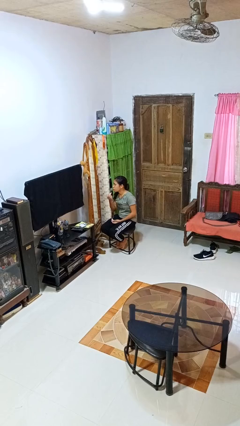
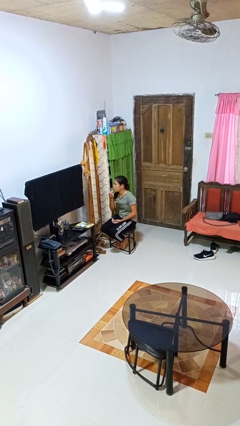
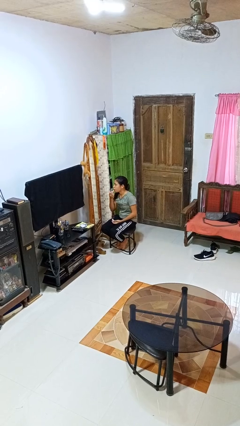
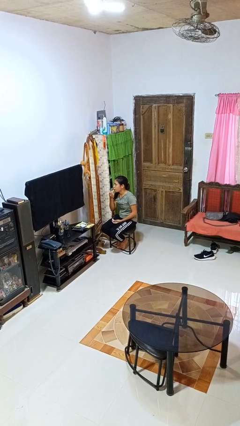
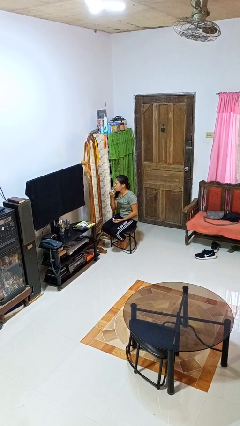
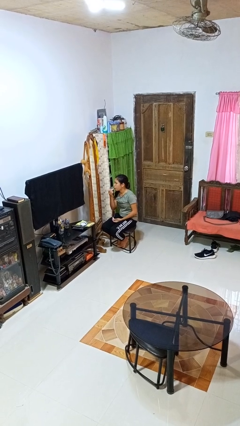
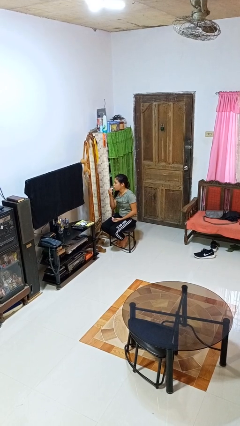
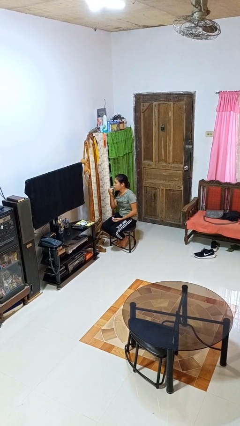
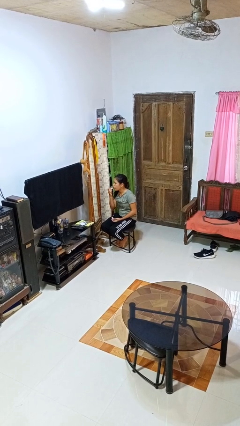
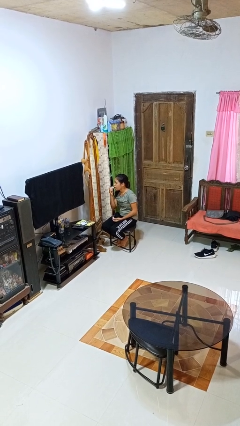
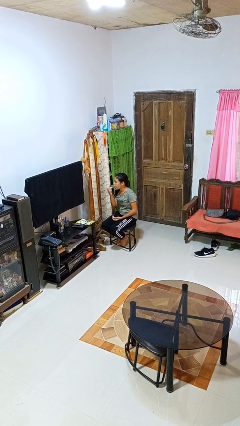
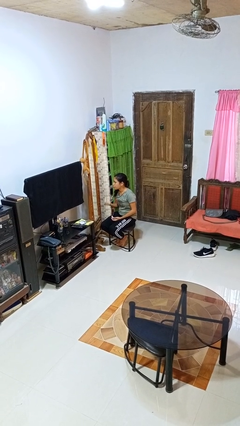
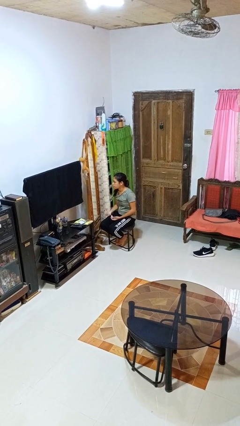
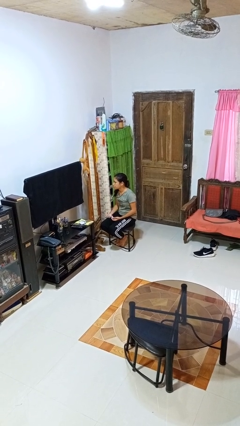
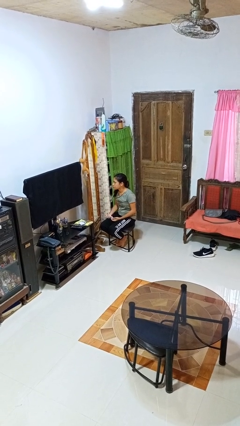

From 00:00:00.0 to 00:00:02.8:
person applies lip makeup

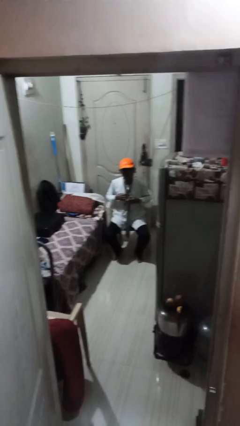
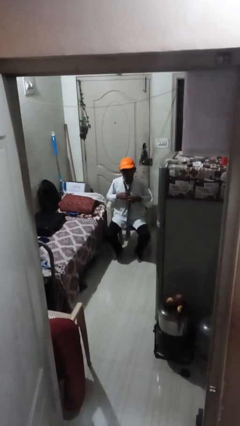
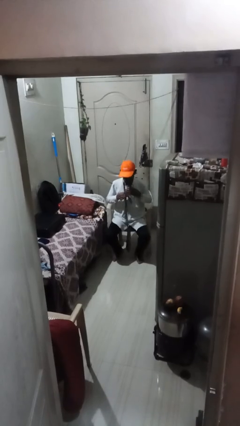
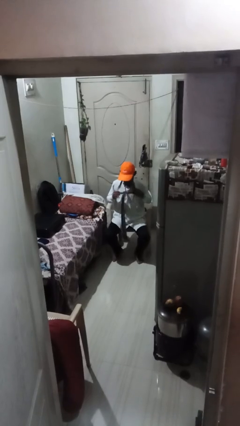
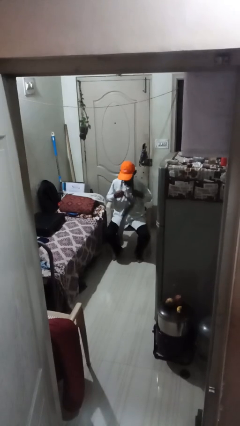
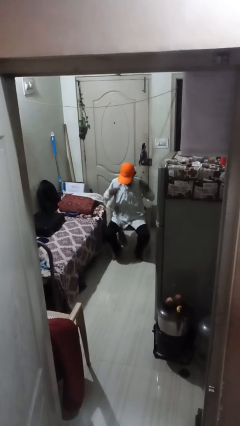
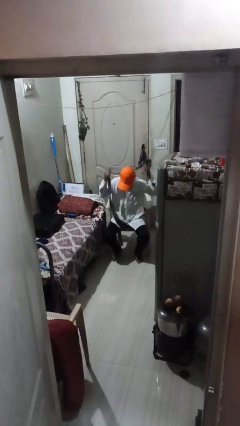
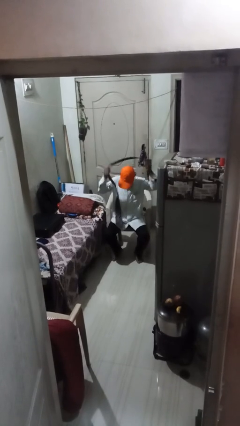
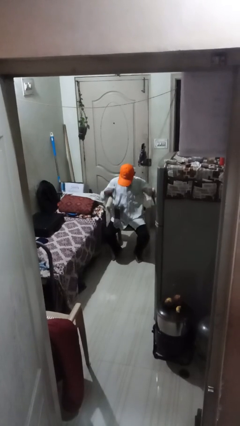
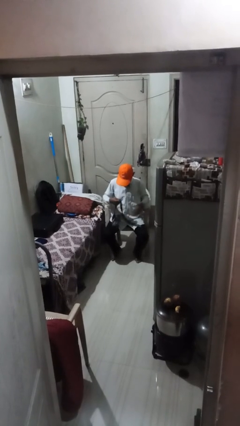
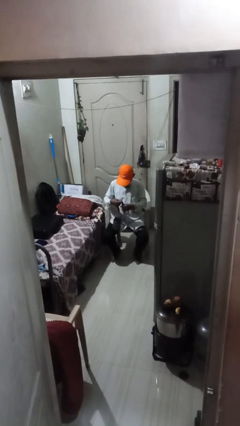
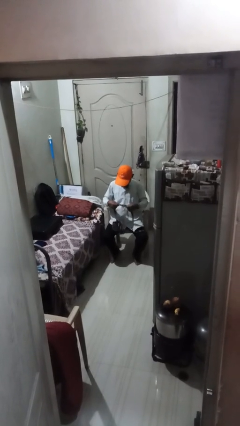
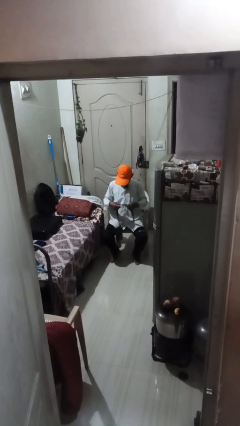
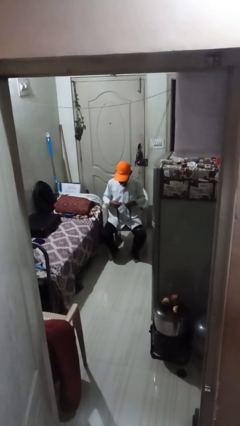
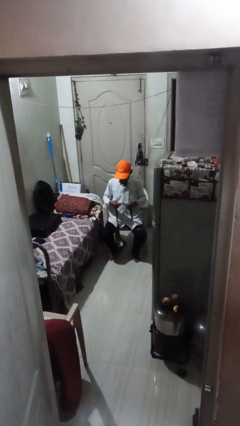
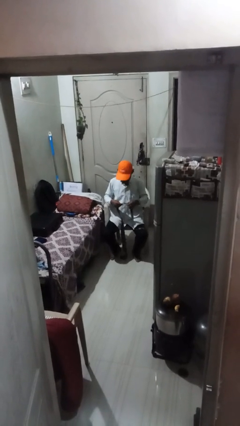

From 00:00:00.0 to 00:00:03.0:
person takes off necktie

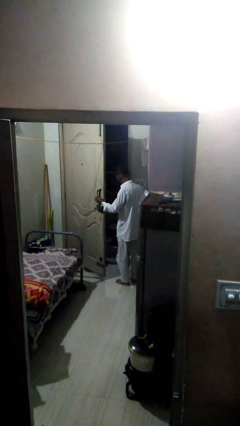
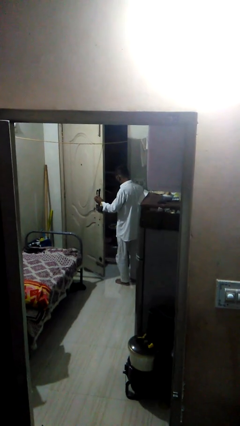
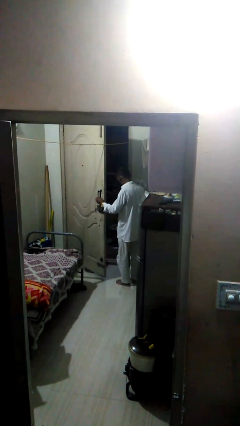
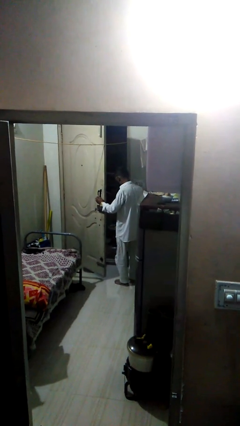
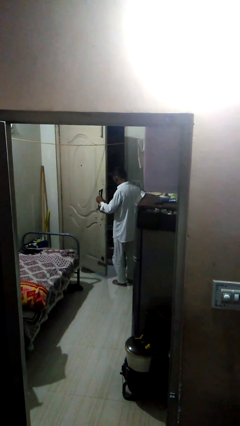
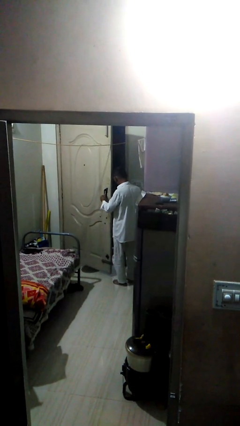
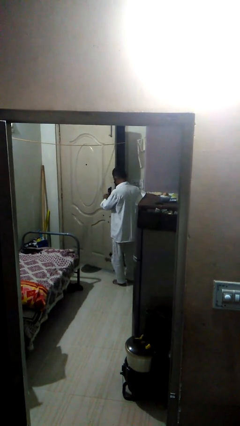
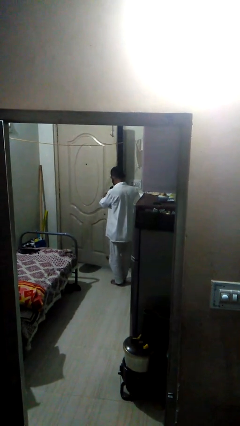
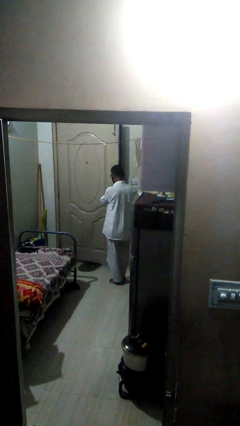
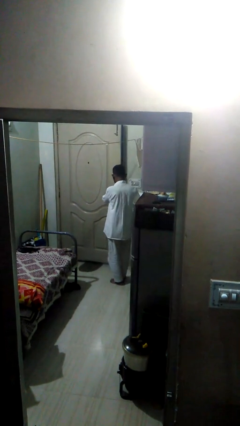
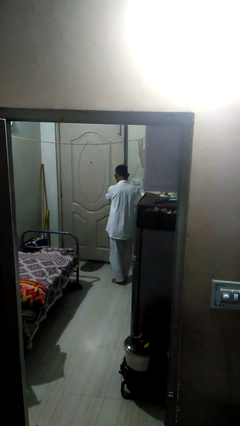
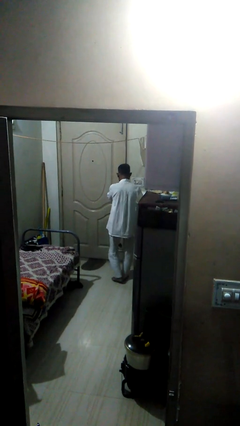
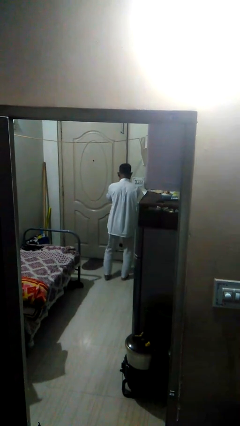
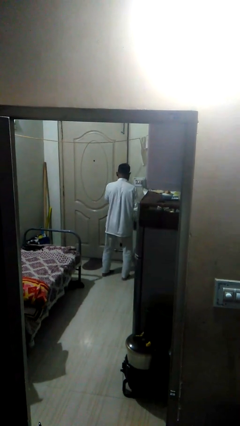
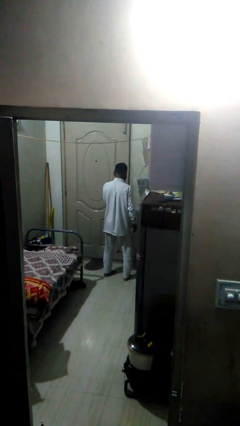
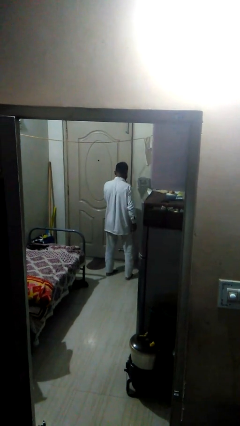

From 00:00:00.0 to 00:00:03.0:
person closes facility door

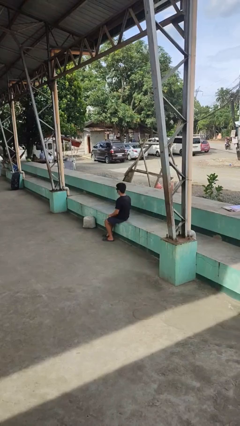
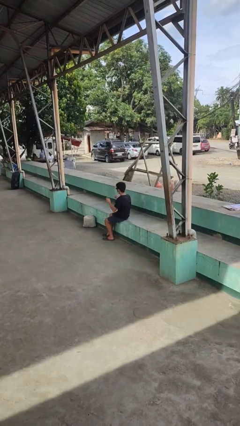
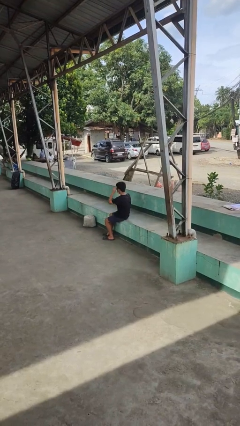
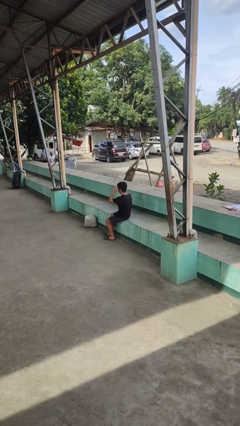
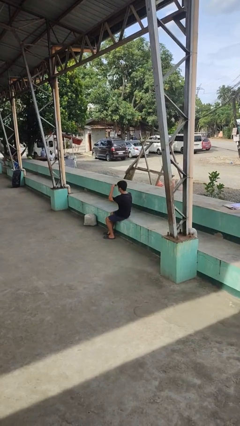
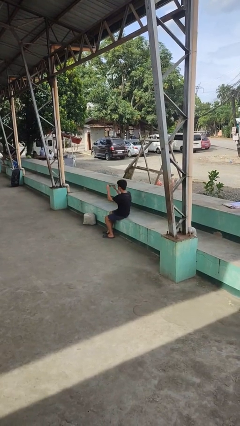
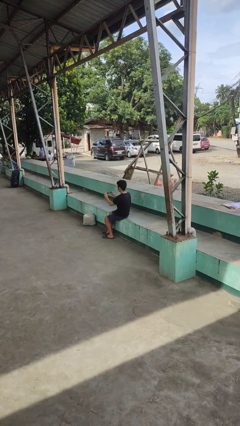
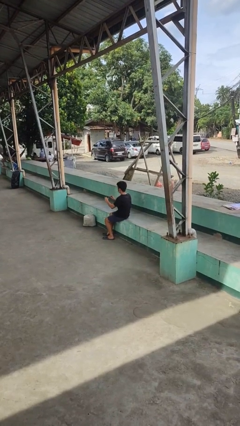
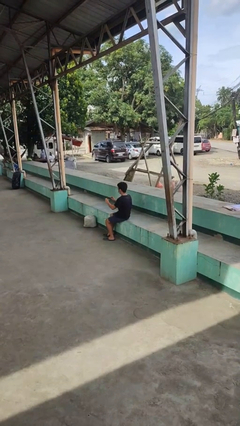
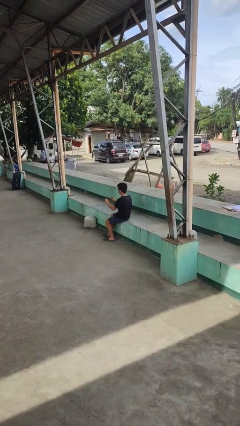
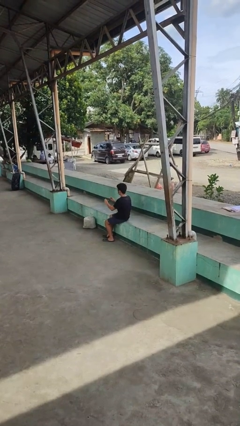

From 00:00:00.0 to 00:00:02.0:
person takes off sunglasses

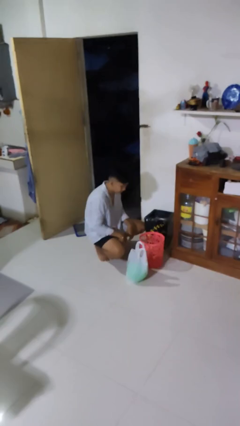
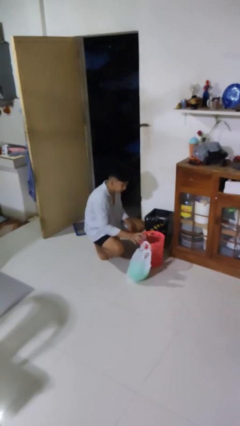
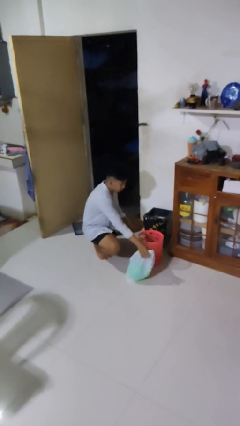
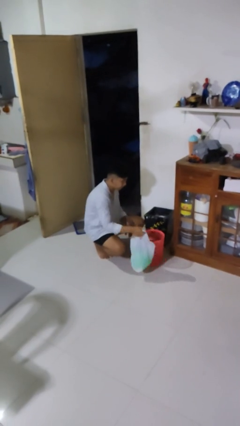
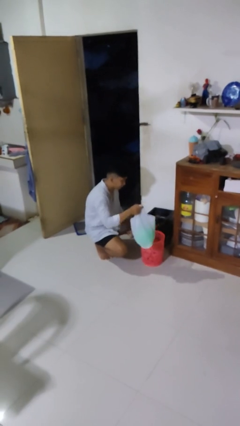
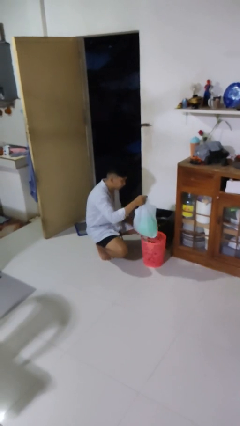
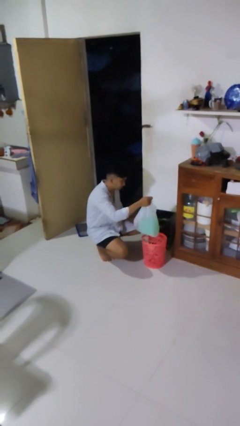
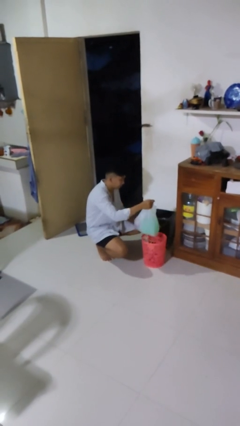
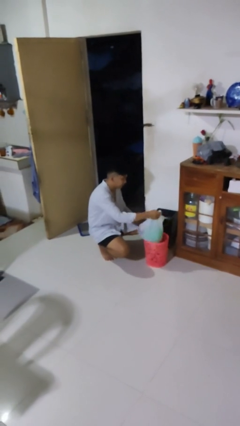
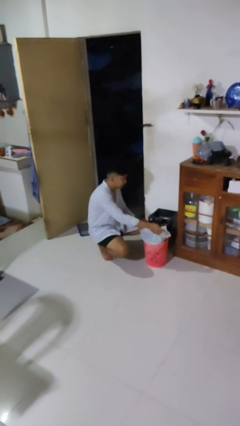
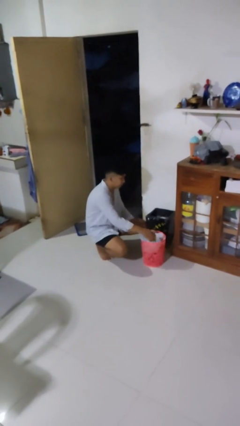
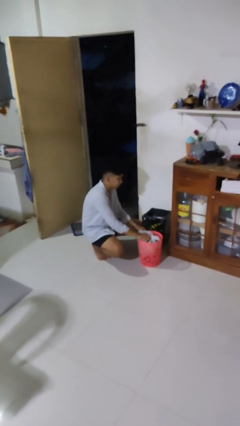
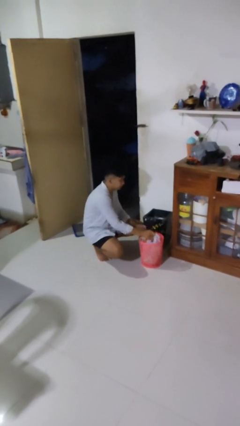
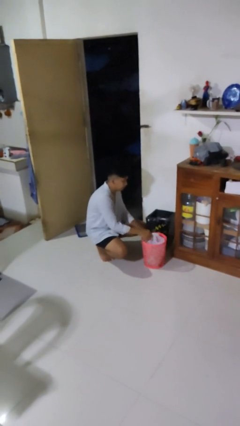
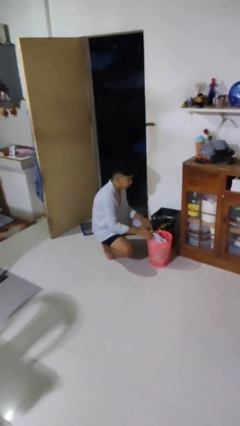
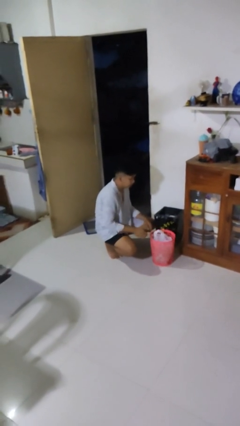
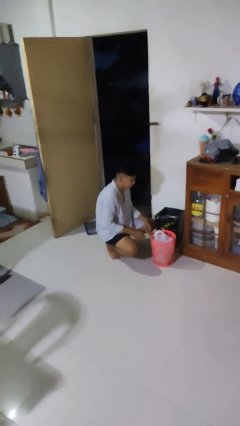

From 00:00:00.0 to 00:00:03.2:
person inserts trashbag into trashcan

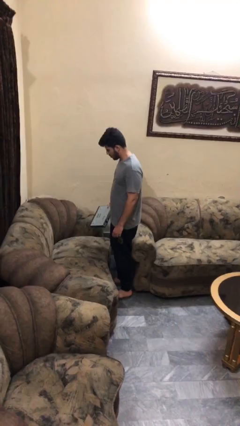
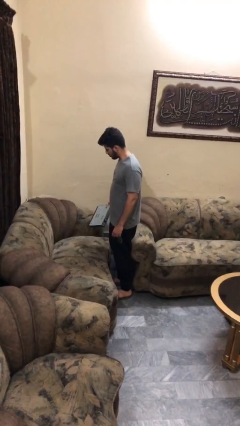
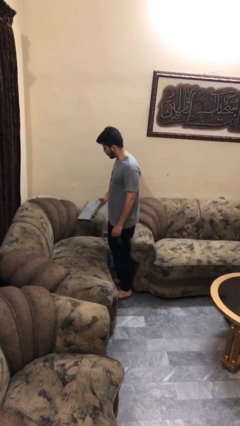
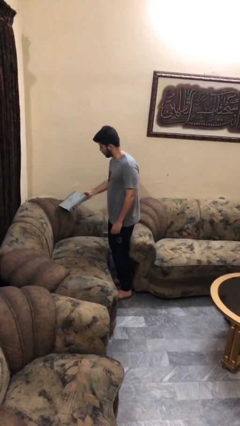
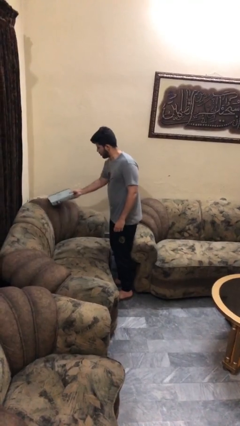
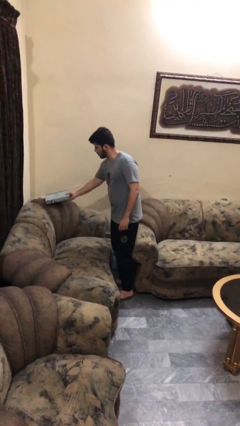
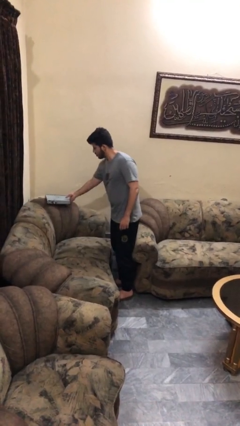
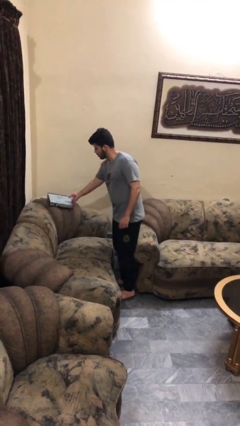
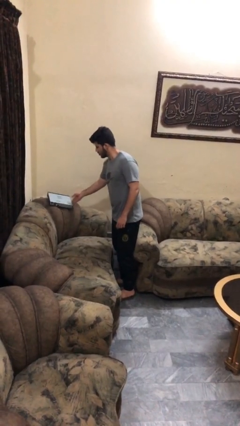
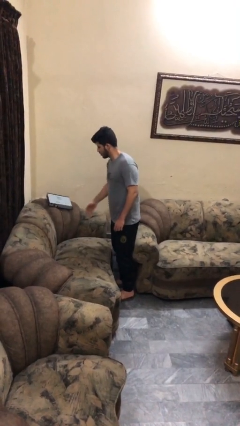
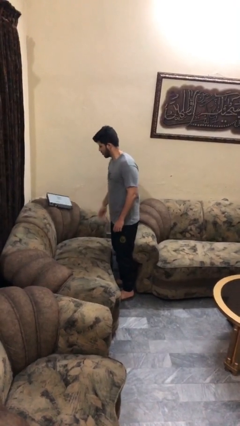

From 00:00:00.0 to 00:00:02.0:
person puts down object on couch

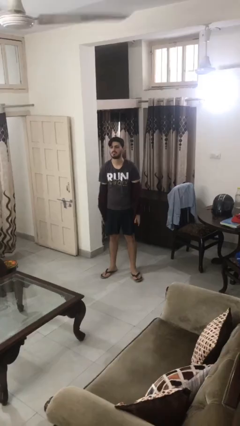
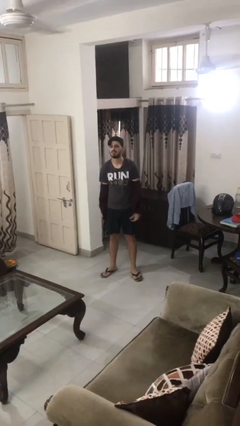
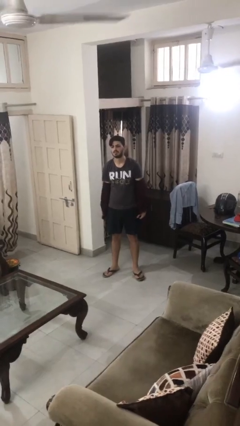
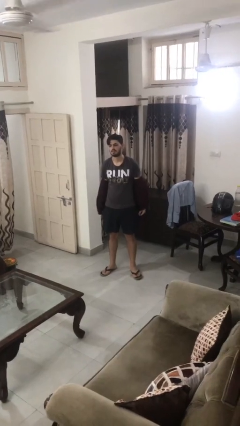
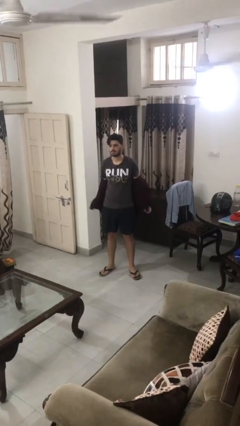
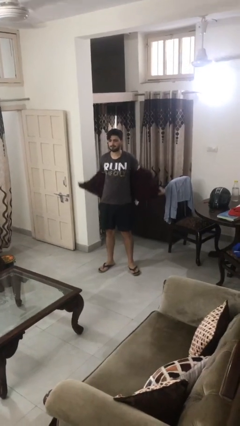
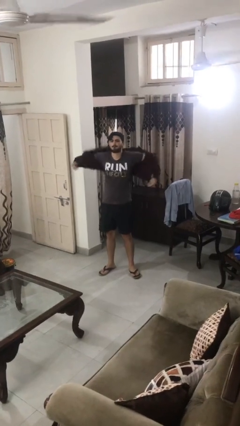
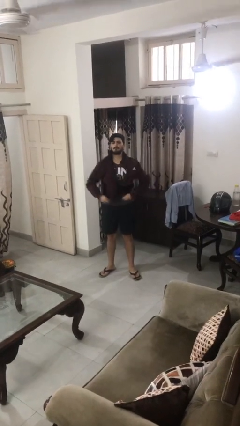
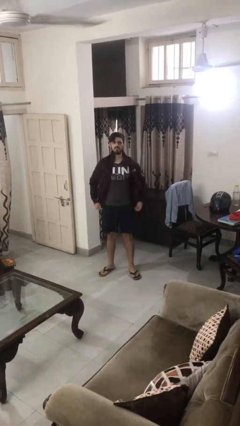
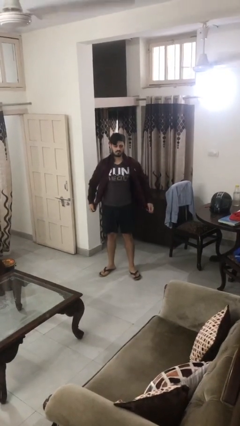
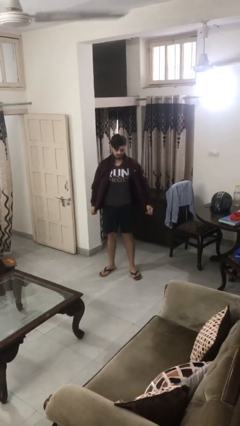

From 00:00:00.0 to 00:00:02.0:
person puts on jacket
